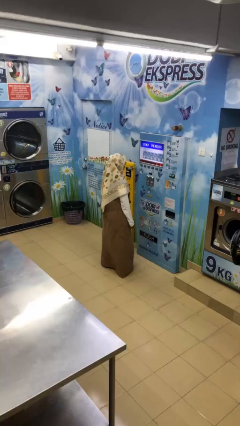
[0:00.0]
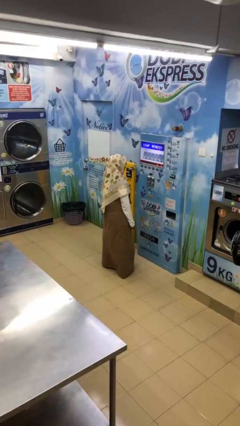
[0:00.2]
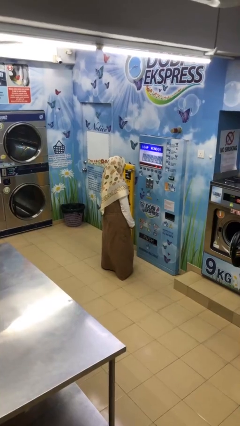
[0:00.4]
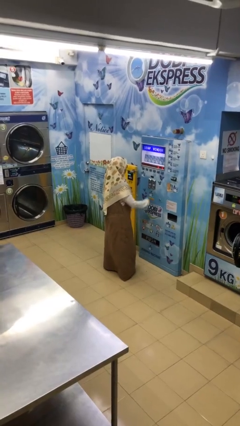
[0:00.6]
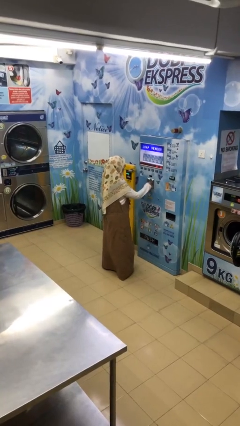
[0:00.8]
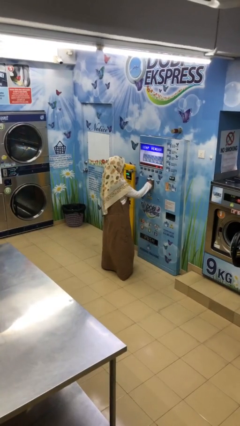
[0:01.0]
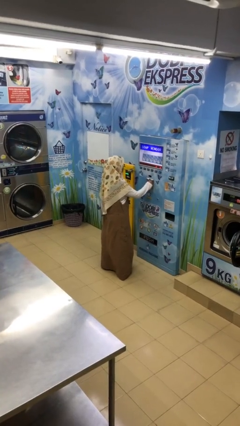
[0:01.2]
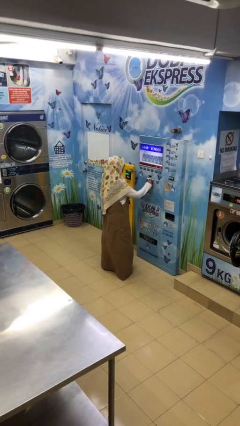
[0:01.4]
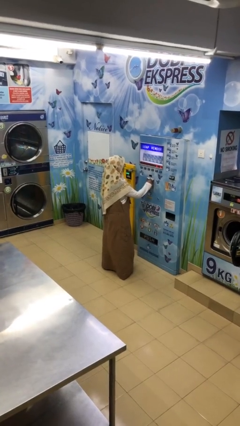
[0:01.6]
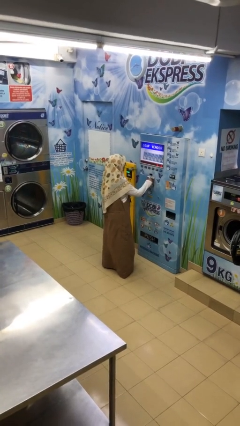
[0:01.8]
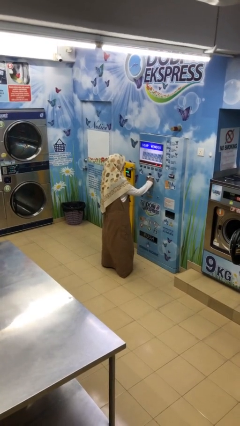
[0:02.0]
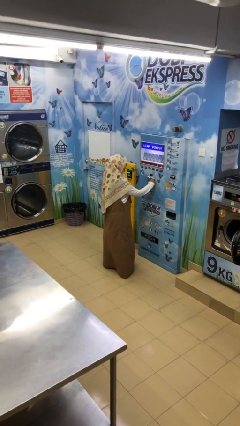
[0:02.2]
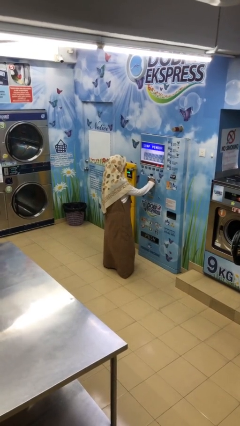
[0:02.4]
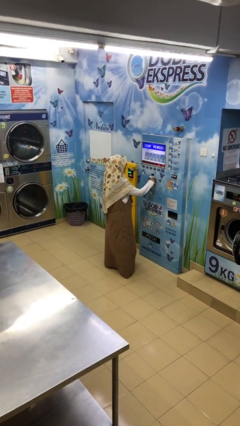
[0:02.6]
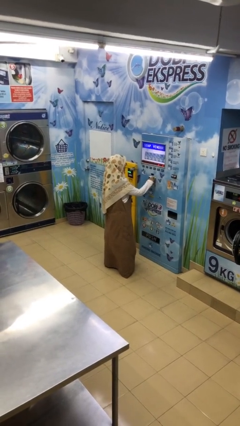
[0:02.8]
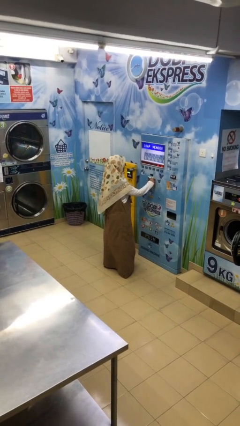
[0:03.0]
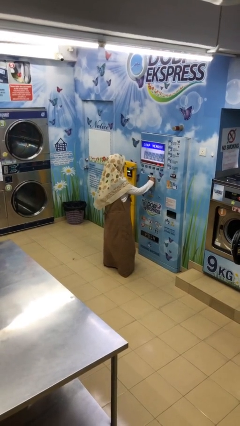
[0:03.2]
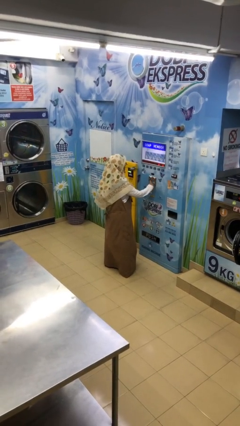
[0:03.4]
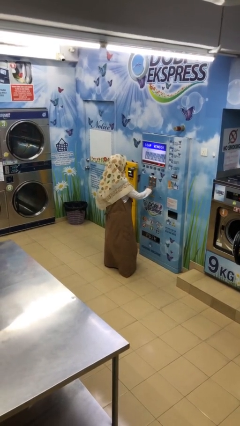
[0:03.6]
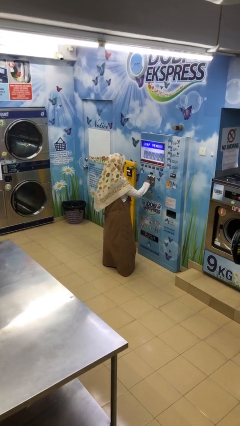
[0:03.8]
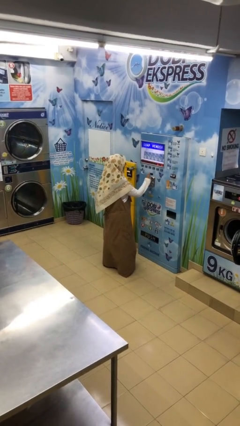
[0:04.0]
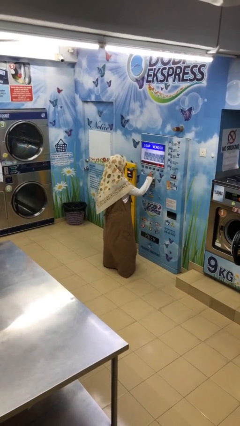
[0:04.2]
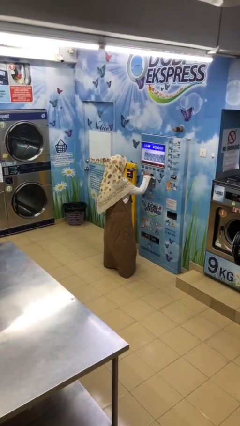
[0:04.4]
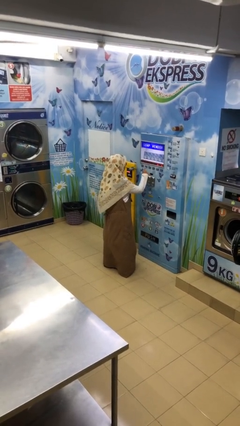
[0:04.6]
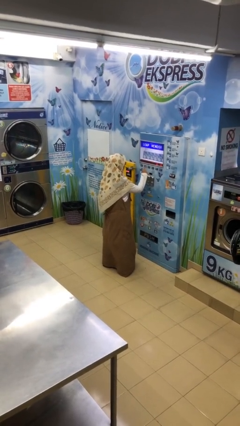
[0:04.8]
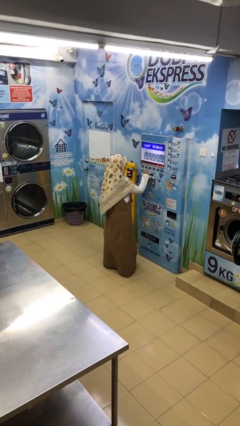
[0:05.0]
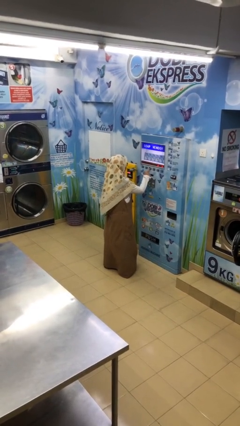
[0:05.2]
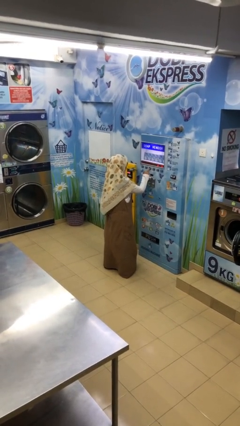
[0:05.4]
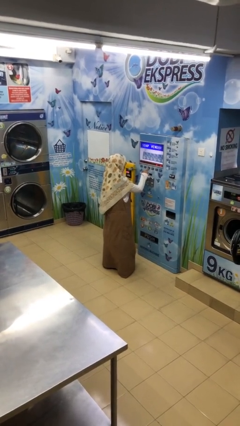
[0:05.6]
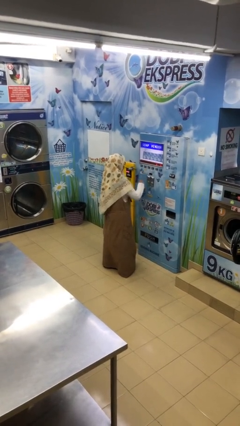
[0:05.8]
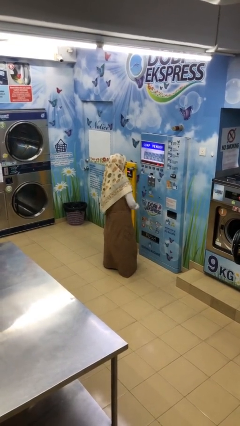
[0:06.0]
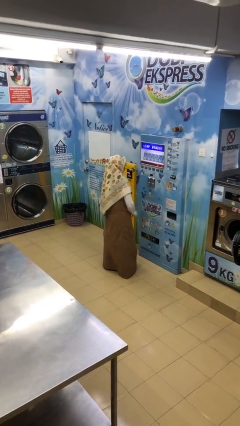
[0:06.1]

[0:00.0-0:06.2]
person purchases from machine

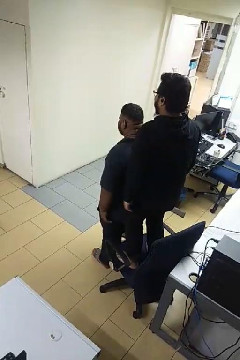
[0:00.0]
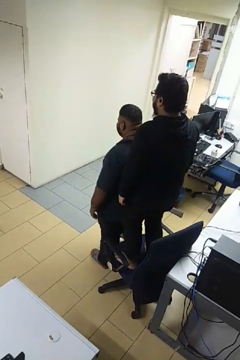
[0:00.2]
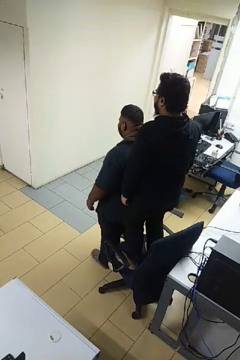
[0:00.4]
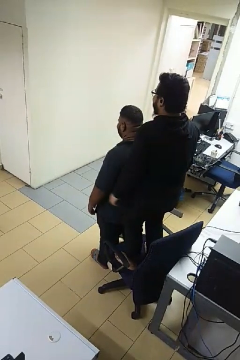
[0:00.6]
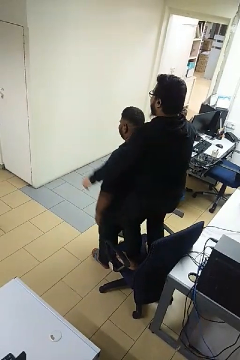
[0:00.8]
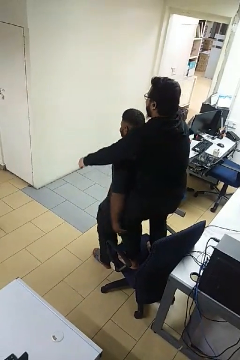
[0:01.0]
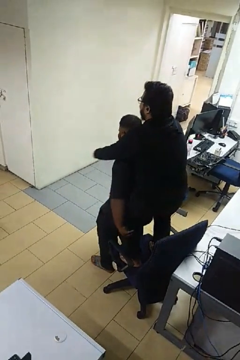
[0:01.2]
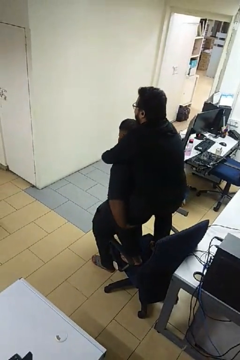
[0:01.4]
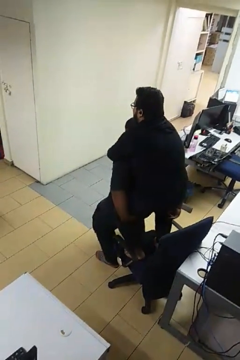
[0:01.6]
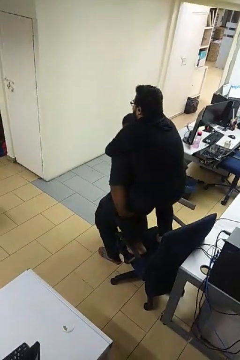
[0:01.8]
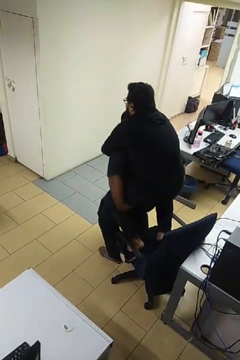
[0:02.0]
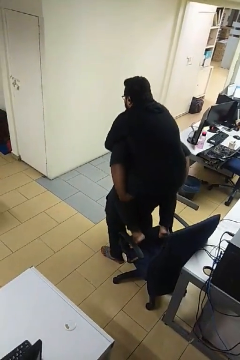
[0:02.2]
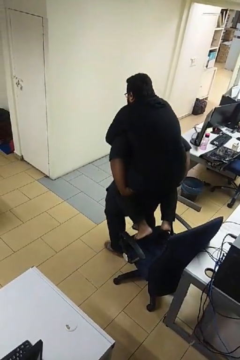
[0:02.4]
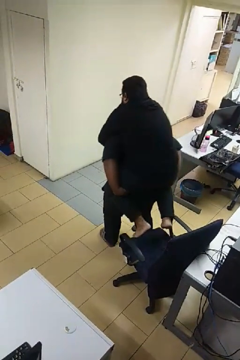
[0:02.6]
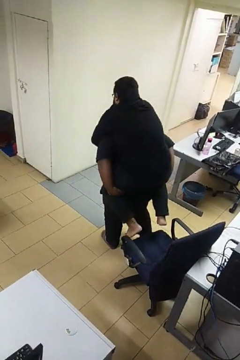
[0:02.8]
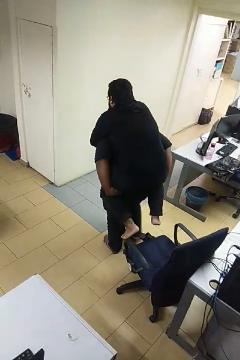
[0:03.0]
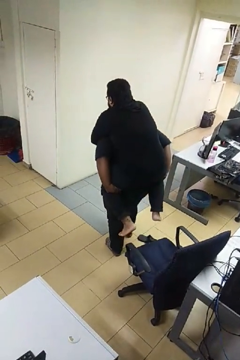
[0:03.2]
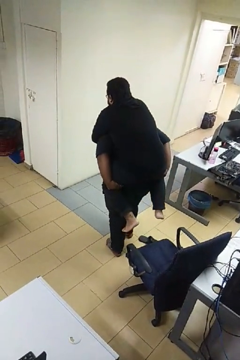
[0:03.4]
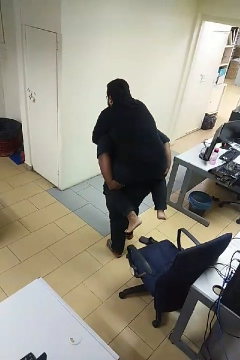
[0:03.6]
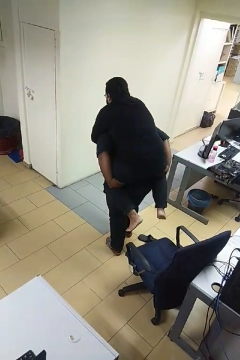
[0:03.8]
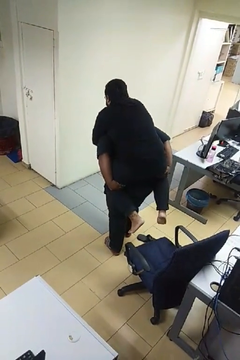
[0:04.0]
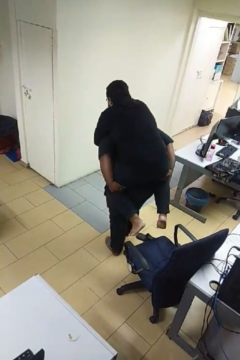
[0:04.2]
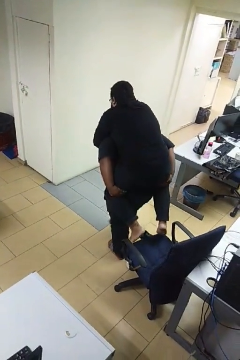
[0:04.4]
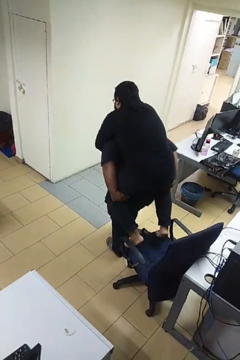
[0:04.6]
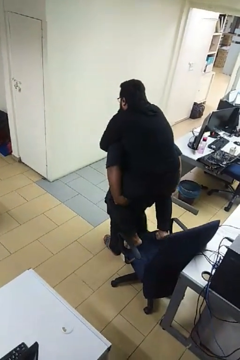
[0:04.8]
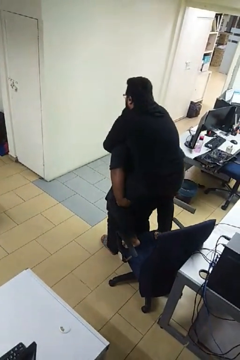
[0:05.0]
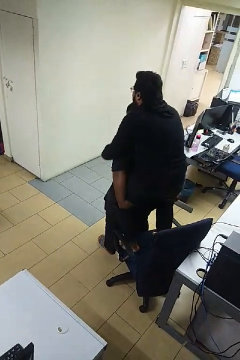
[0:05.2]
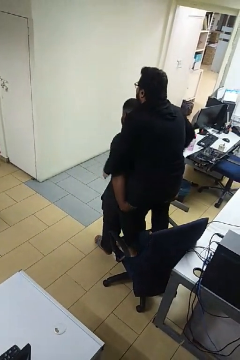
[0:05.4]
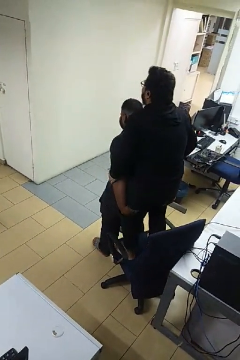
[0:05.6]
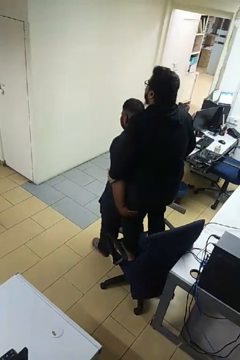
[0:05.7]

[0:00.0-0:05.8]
person carries person on back

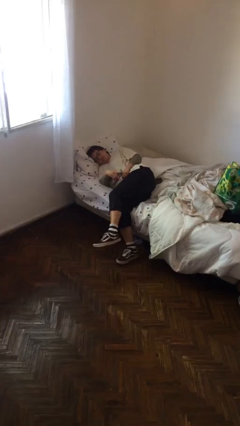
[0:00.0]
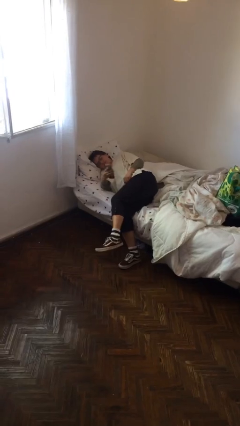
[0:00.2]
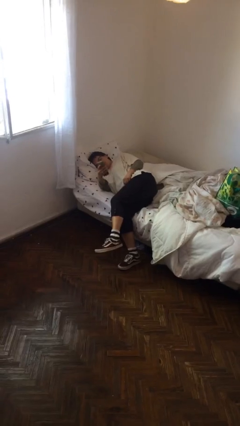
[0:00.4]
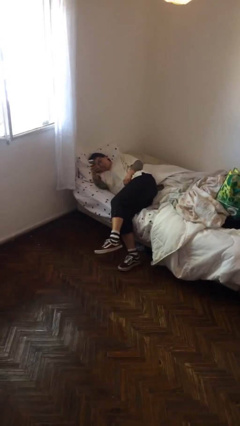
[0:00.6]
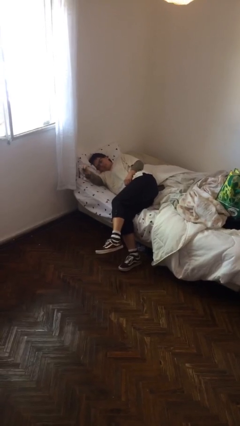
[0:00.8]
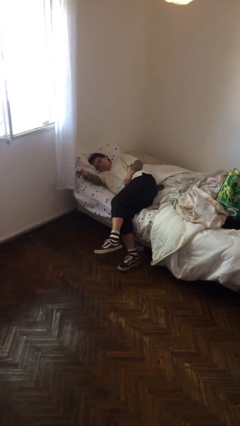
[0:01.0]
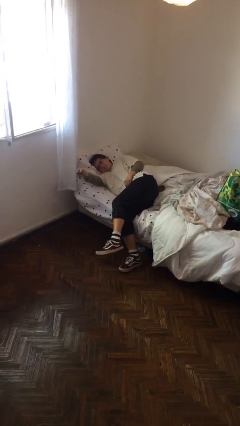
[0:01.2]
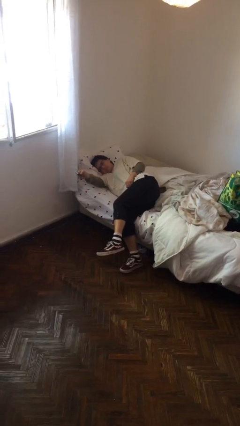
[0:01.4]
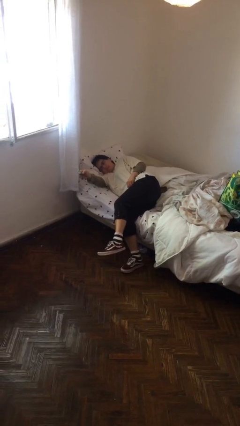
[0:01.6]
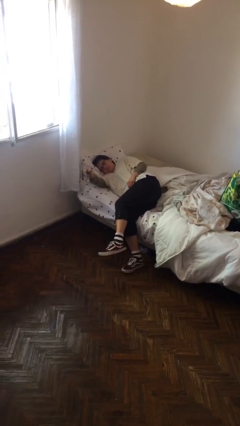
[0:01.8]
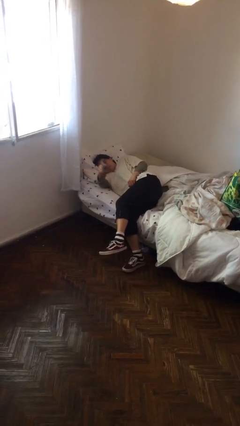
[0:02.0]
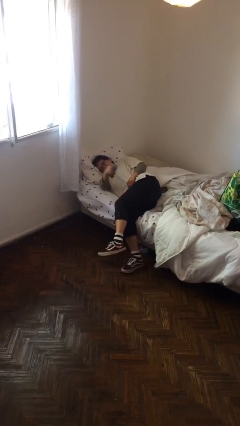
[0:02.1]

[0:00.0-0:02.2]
person uses television remote

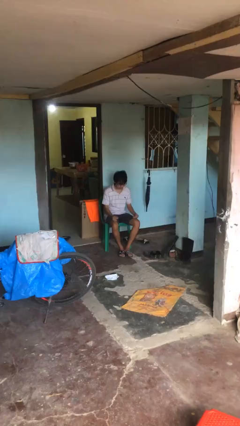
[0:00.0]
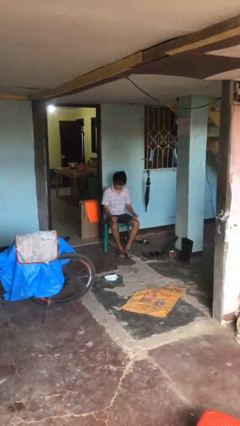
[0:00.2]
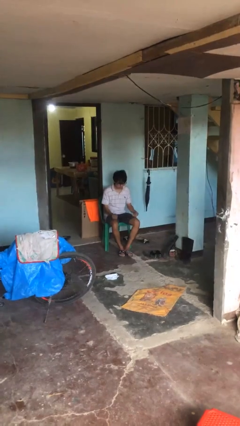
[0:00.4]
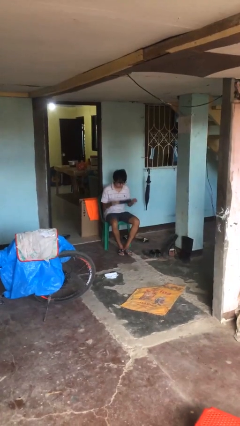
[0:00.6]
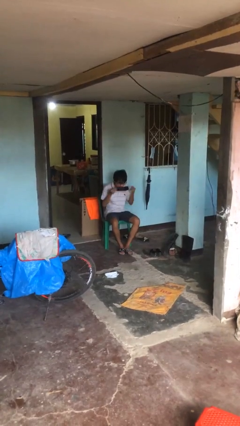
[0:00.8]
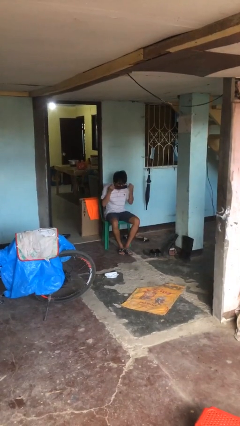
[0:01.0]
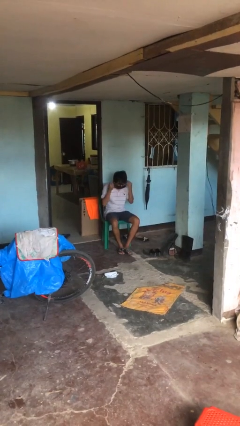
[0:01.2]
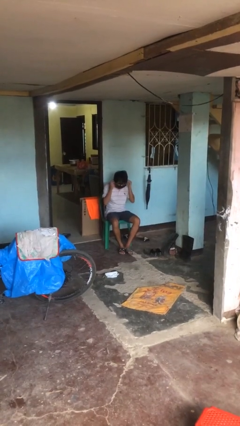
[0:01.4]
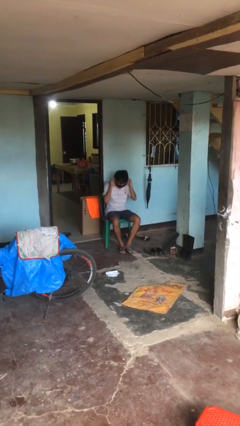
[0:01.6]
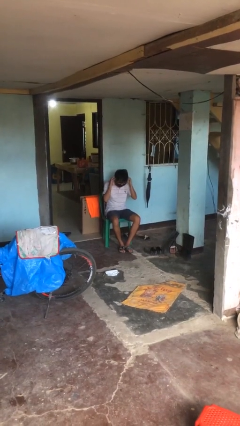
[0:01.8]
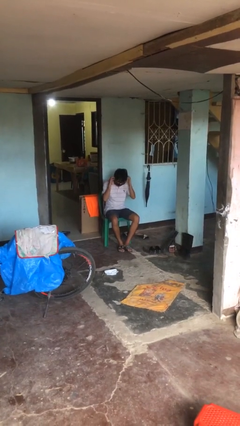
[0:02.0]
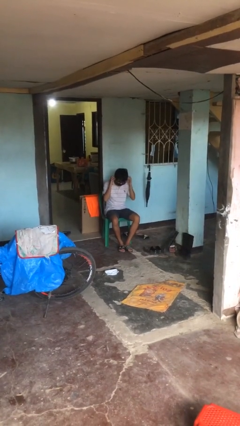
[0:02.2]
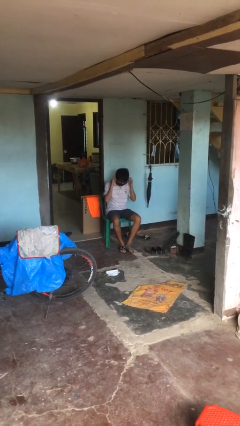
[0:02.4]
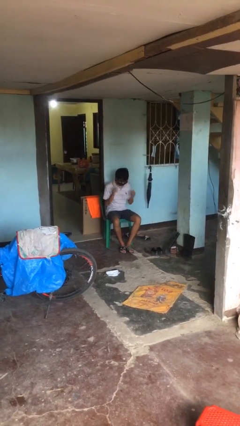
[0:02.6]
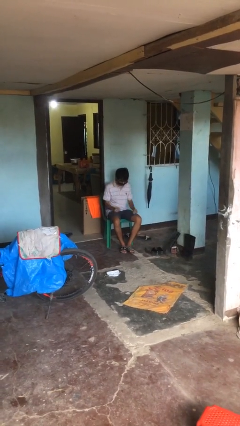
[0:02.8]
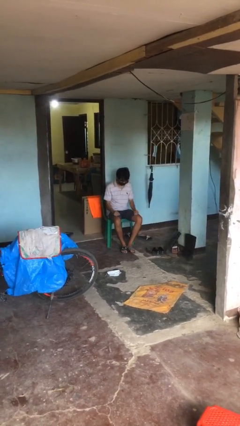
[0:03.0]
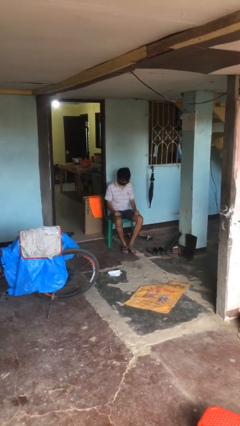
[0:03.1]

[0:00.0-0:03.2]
person puts on facemask

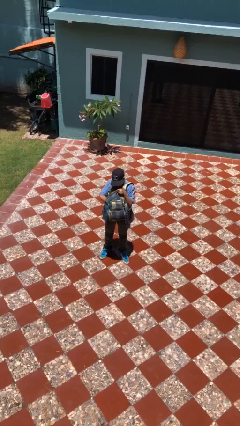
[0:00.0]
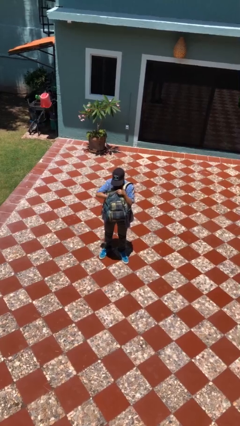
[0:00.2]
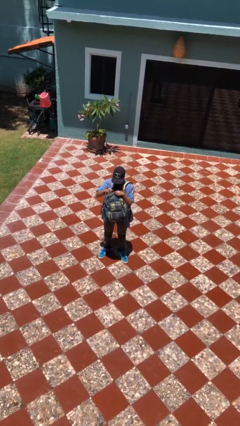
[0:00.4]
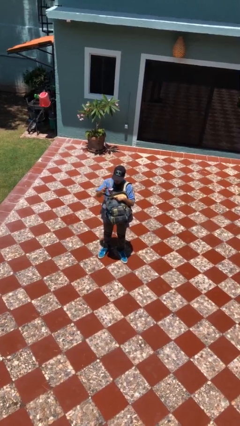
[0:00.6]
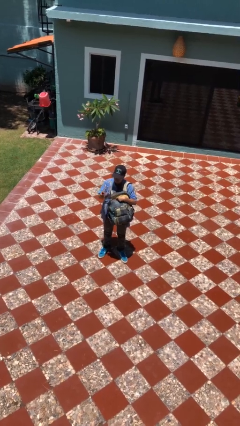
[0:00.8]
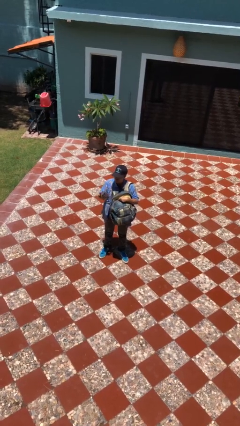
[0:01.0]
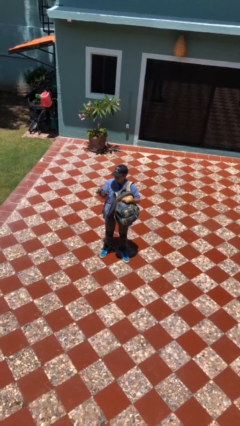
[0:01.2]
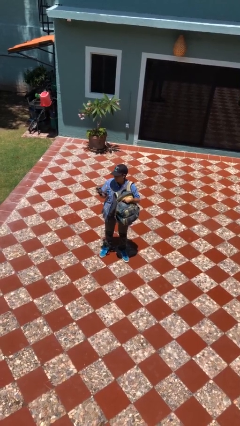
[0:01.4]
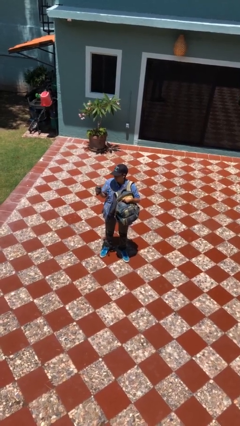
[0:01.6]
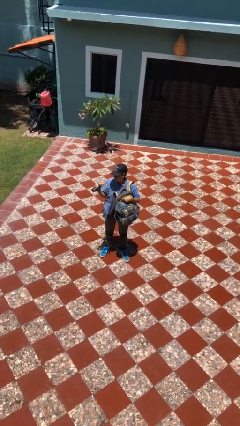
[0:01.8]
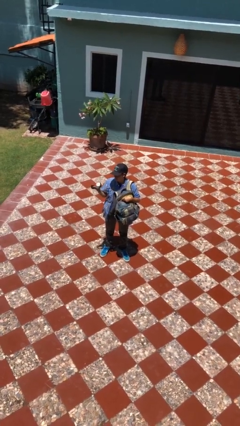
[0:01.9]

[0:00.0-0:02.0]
person takes object from backpack
